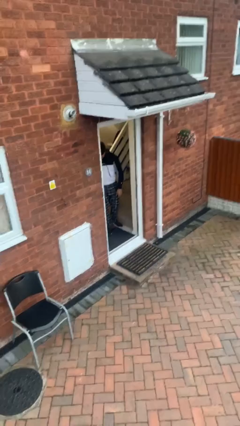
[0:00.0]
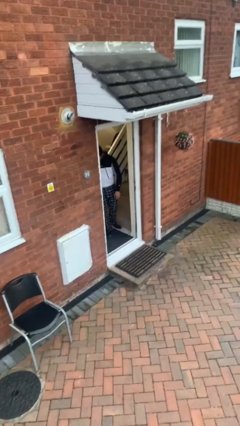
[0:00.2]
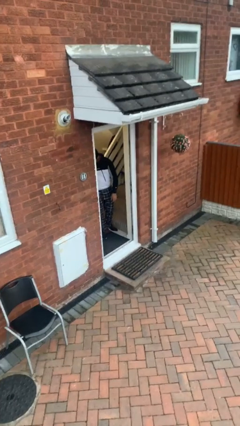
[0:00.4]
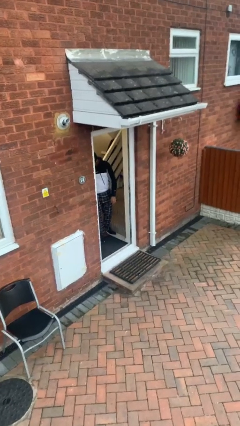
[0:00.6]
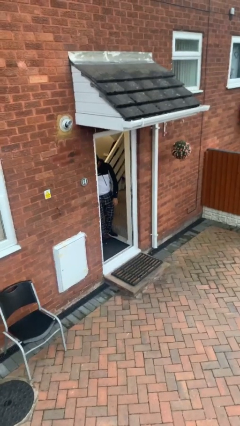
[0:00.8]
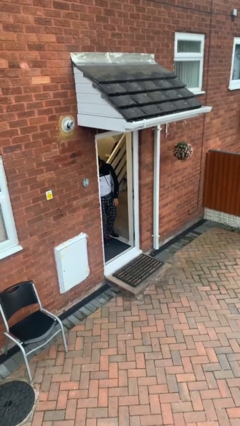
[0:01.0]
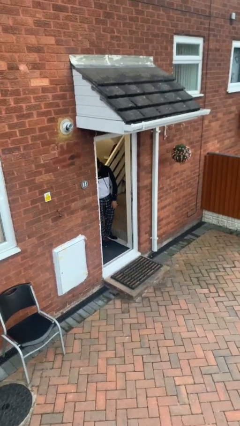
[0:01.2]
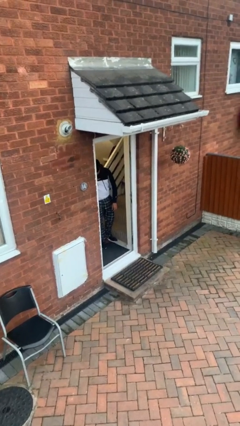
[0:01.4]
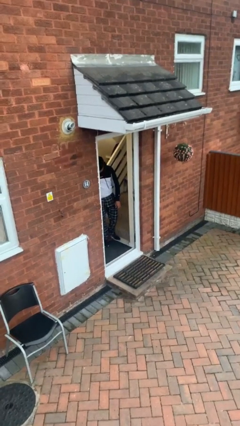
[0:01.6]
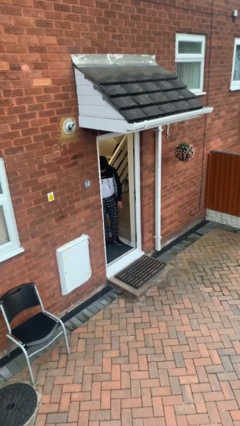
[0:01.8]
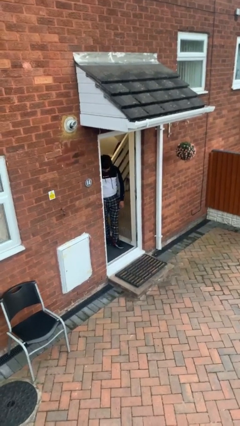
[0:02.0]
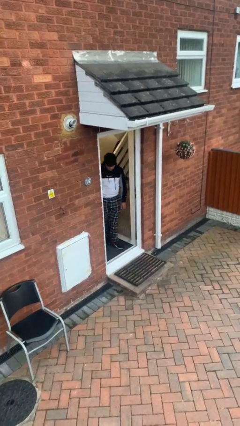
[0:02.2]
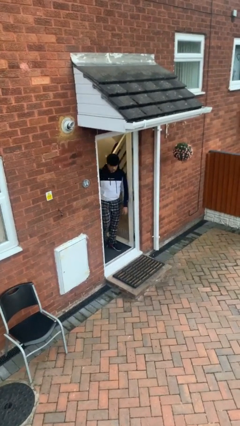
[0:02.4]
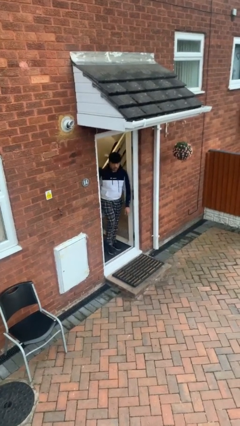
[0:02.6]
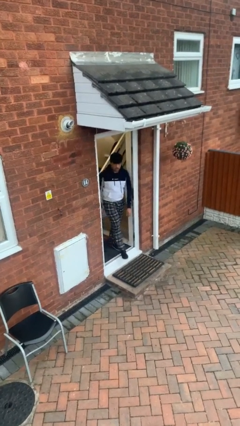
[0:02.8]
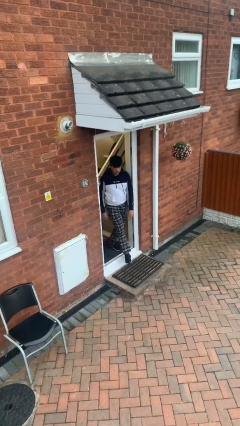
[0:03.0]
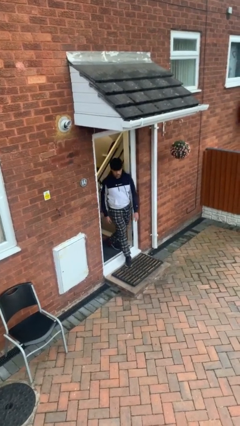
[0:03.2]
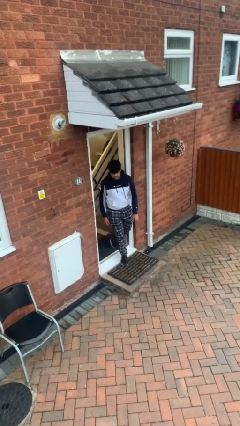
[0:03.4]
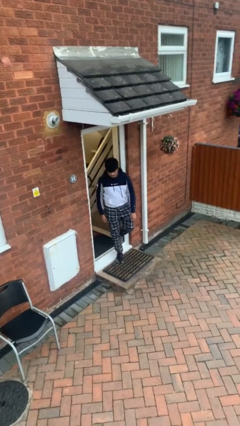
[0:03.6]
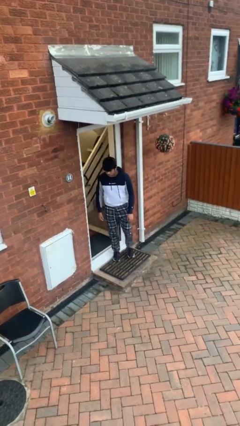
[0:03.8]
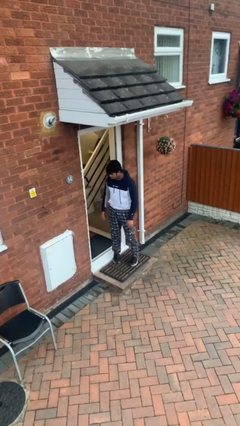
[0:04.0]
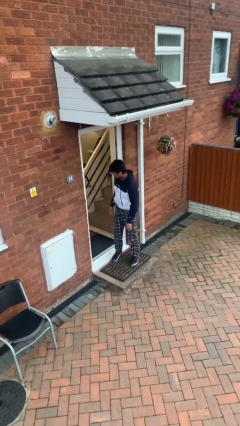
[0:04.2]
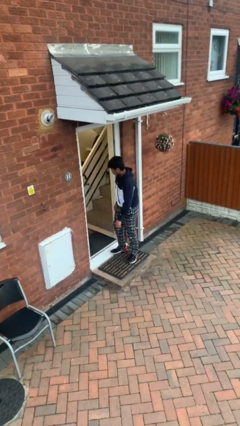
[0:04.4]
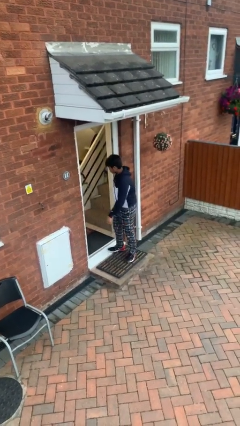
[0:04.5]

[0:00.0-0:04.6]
person enters scene through structure

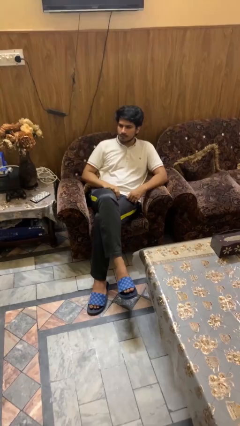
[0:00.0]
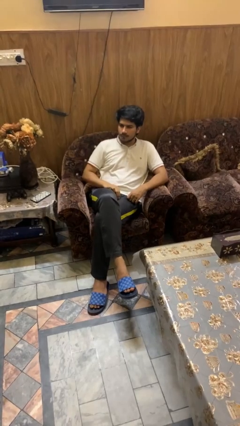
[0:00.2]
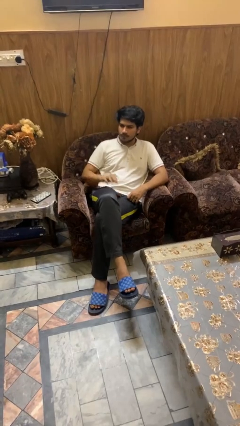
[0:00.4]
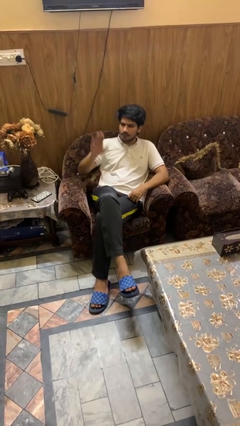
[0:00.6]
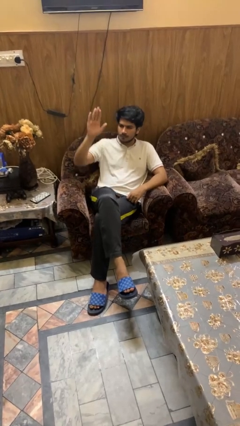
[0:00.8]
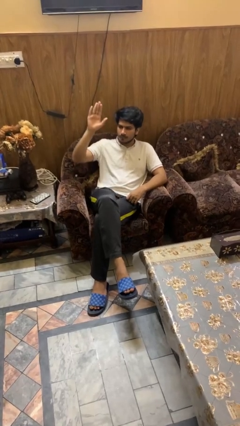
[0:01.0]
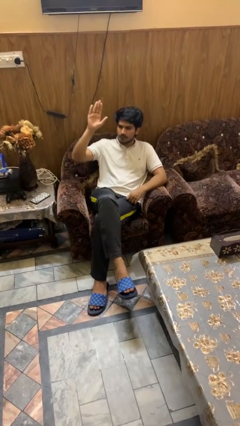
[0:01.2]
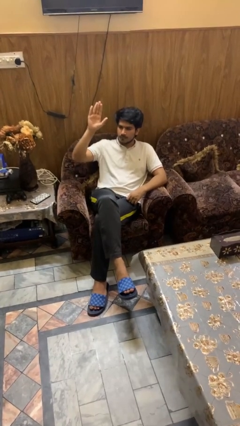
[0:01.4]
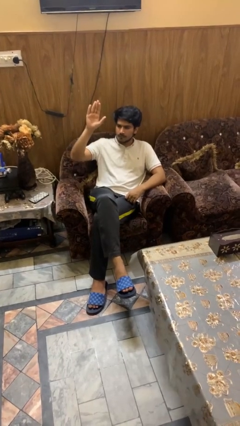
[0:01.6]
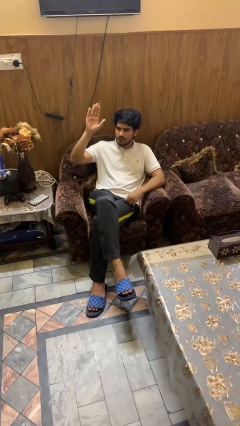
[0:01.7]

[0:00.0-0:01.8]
person gestures raise hand

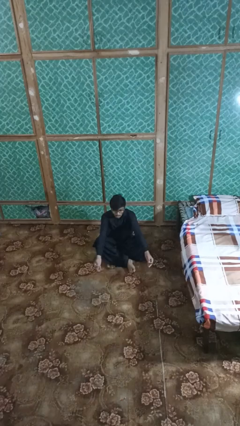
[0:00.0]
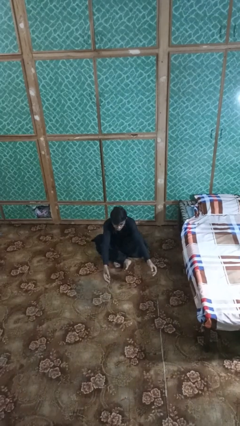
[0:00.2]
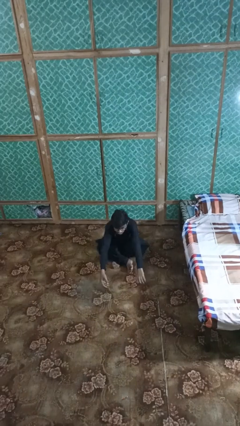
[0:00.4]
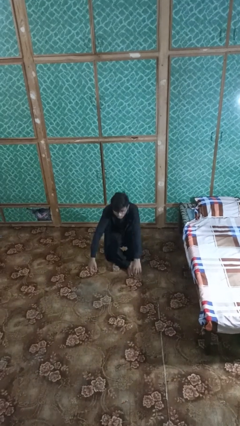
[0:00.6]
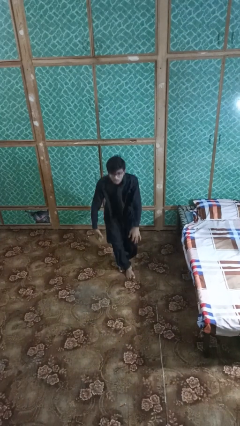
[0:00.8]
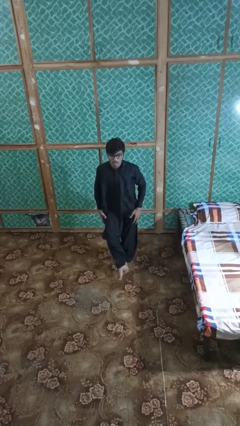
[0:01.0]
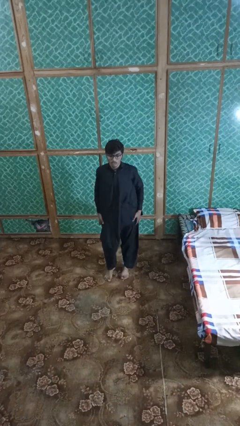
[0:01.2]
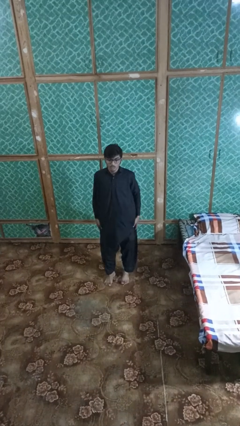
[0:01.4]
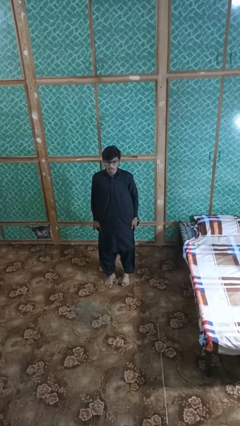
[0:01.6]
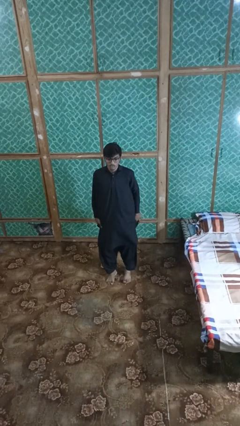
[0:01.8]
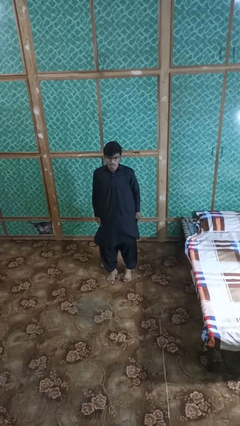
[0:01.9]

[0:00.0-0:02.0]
person stands up from floor

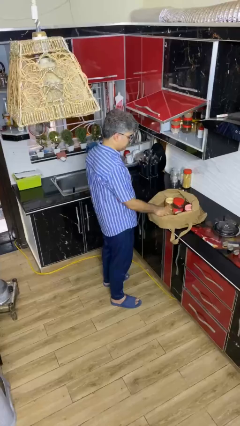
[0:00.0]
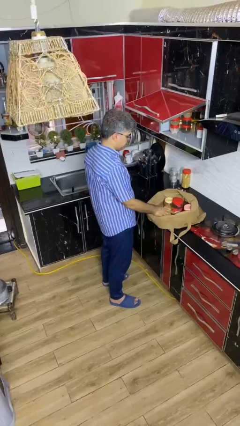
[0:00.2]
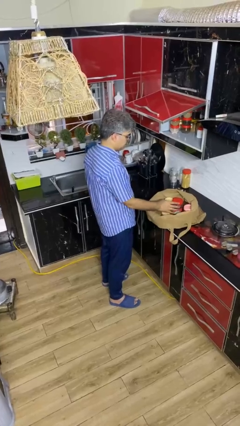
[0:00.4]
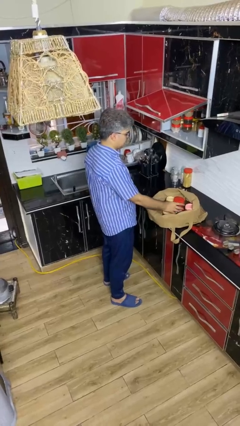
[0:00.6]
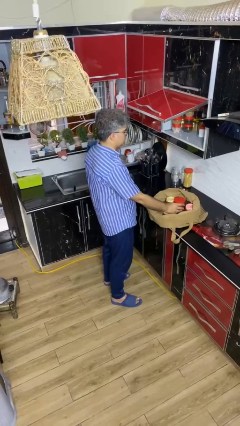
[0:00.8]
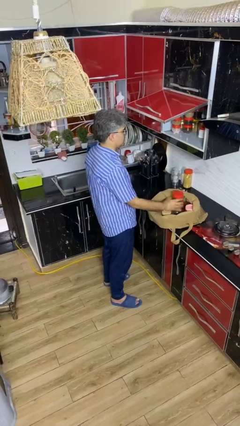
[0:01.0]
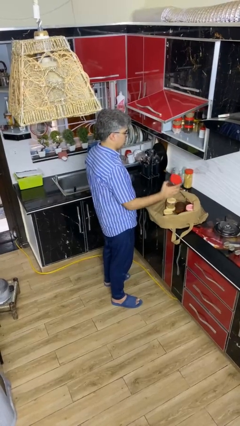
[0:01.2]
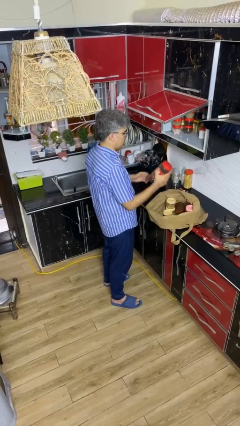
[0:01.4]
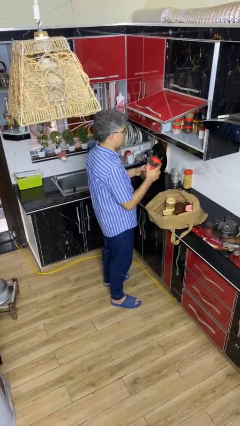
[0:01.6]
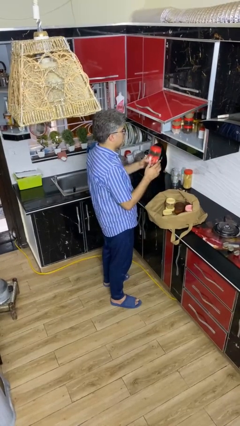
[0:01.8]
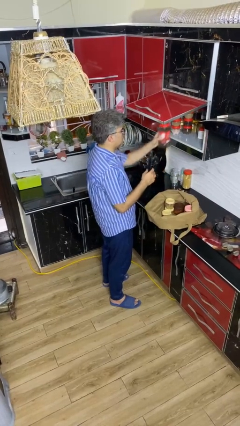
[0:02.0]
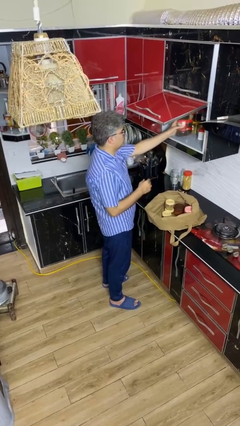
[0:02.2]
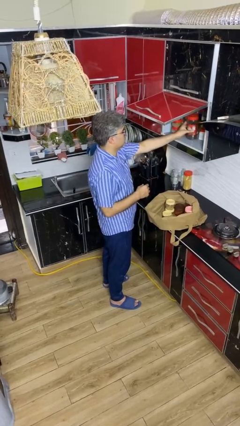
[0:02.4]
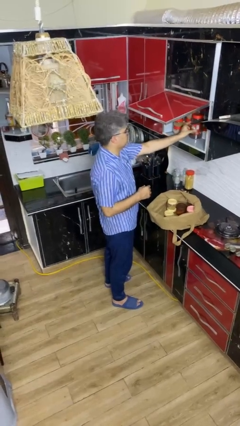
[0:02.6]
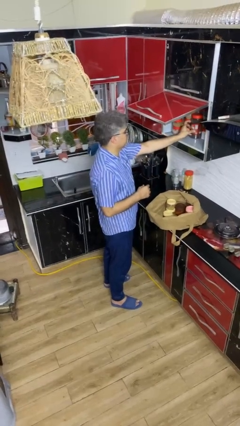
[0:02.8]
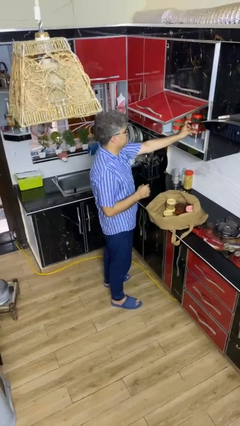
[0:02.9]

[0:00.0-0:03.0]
person loads groceries into cabinet

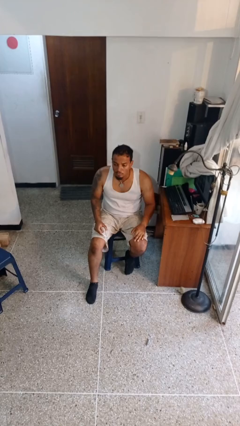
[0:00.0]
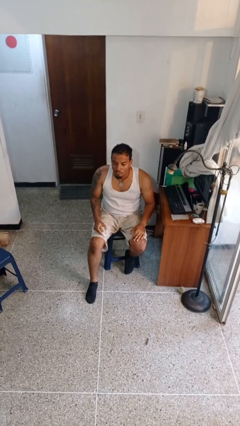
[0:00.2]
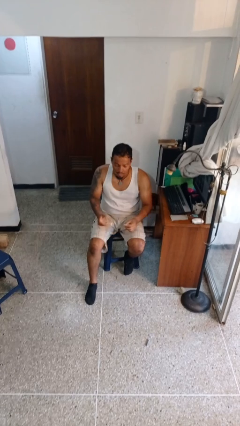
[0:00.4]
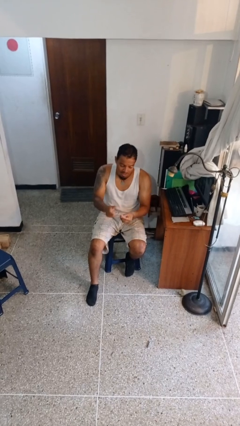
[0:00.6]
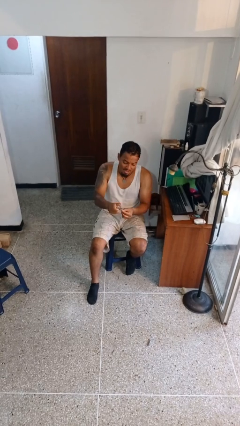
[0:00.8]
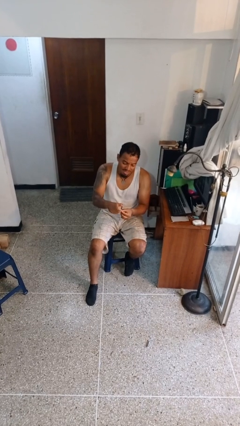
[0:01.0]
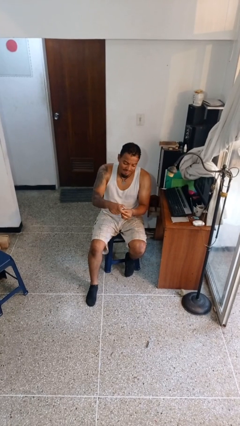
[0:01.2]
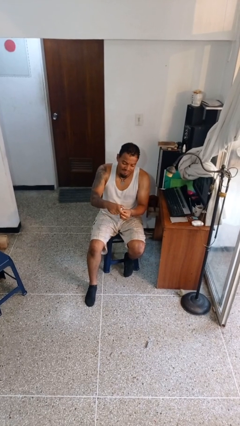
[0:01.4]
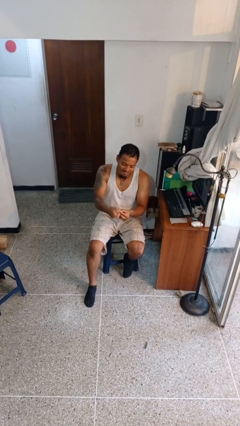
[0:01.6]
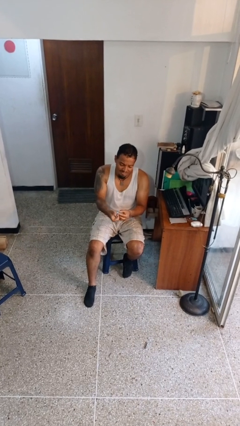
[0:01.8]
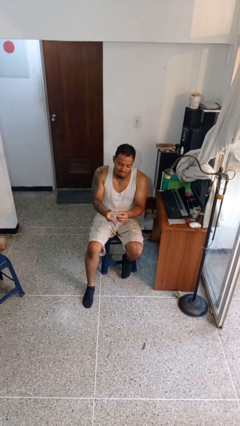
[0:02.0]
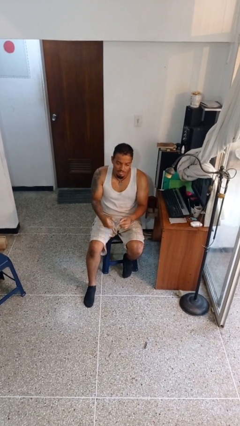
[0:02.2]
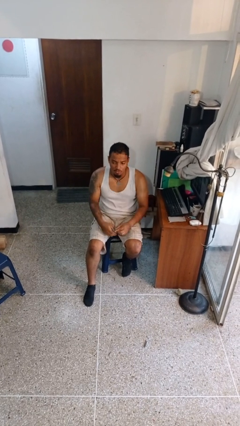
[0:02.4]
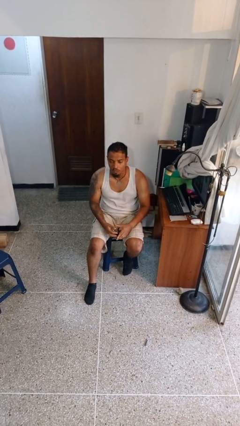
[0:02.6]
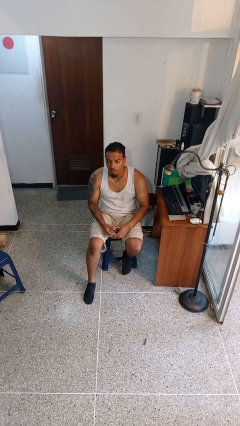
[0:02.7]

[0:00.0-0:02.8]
person clips fingernails

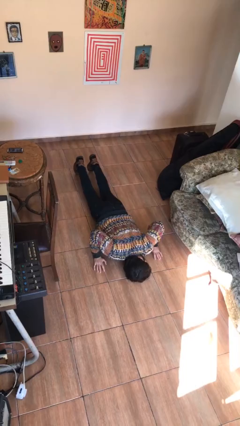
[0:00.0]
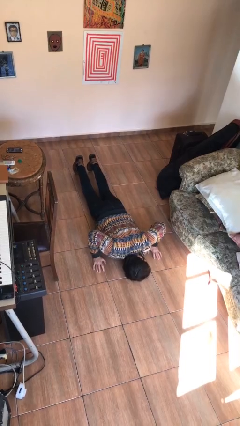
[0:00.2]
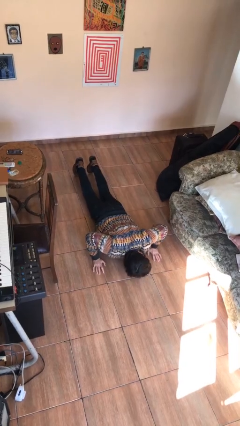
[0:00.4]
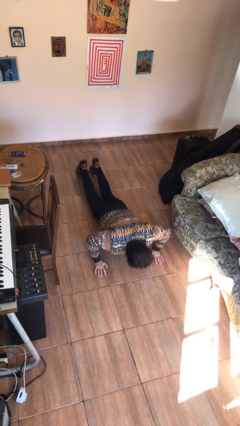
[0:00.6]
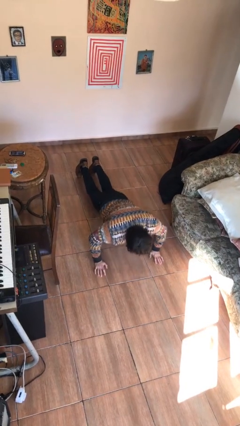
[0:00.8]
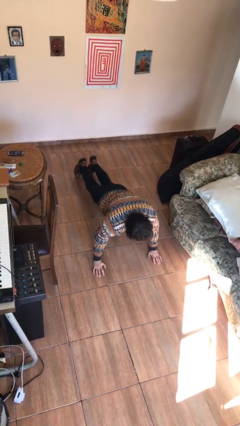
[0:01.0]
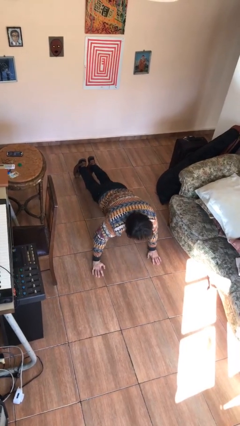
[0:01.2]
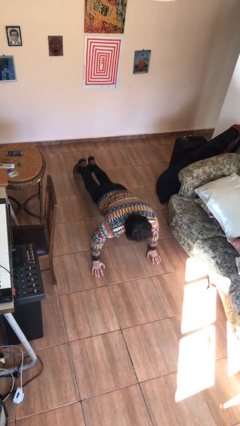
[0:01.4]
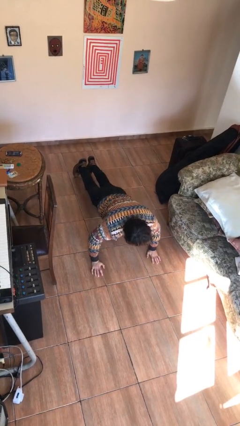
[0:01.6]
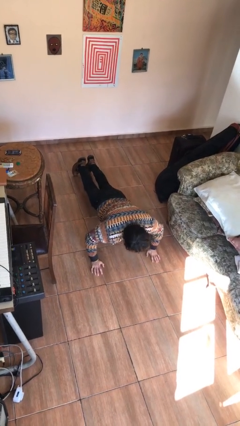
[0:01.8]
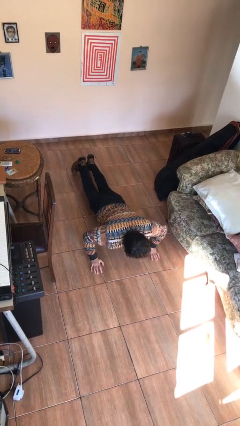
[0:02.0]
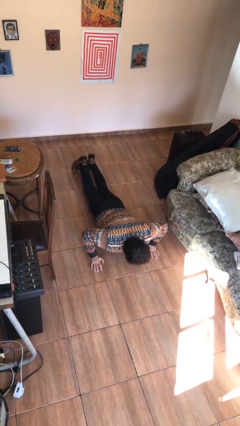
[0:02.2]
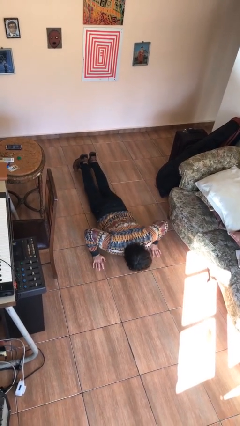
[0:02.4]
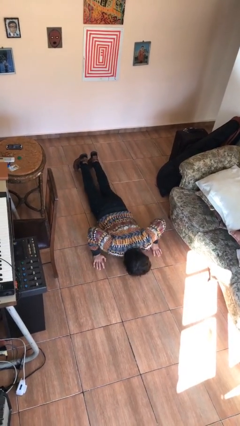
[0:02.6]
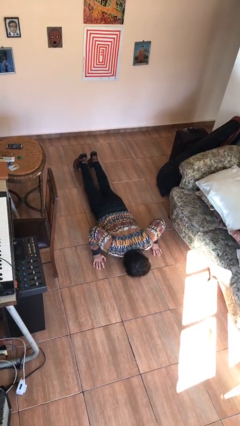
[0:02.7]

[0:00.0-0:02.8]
person exercises with pushup

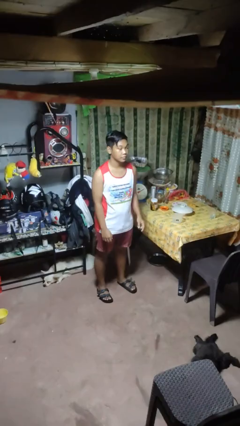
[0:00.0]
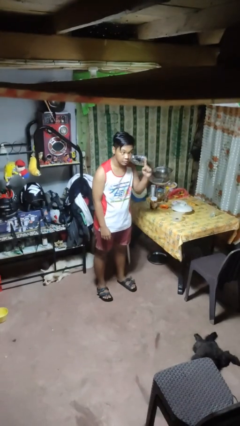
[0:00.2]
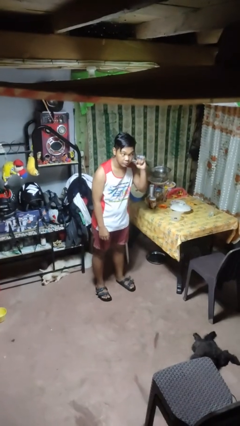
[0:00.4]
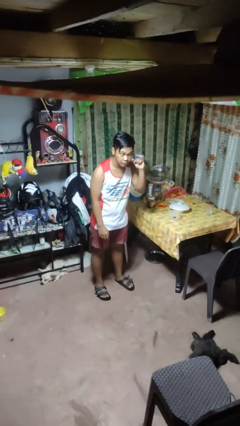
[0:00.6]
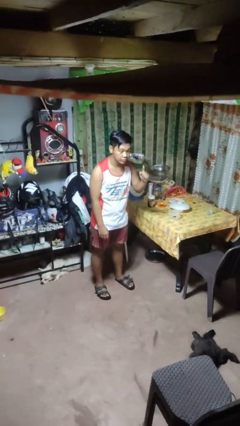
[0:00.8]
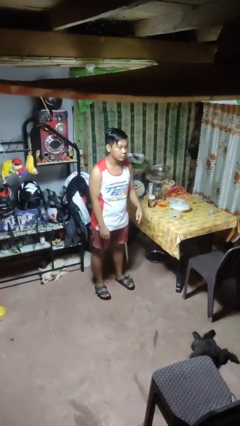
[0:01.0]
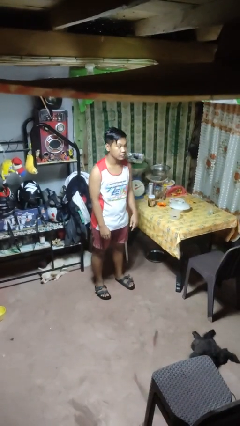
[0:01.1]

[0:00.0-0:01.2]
person gestures listen closely
